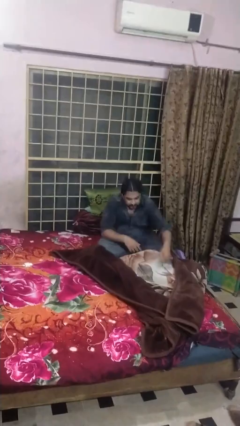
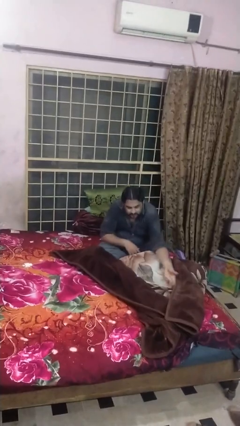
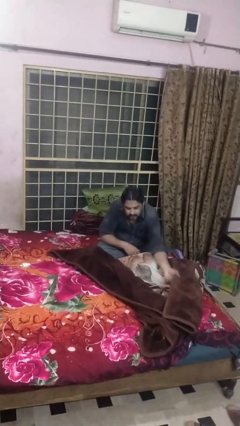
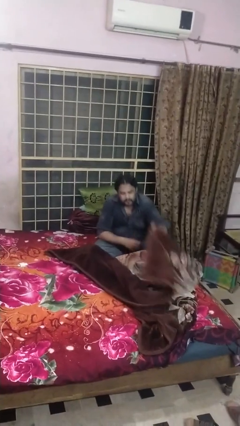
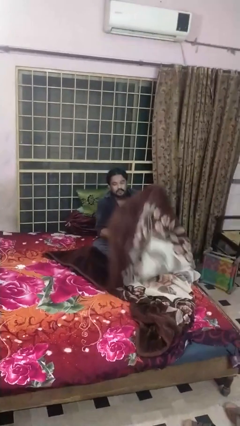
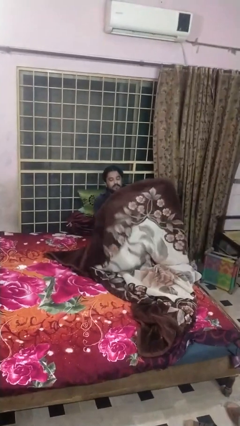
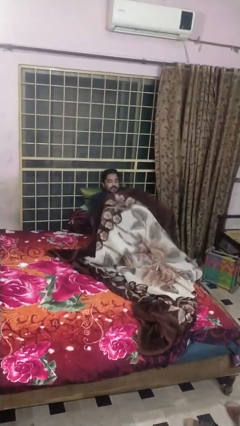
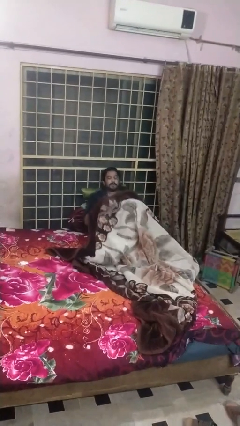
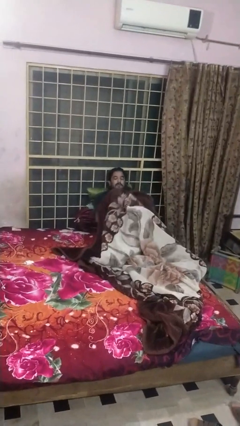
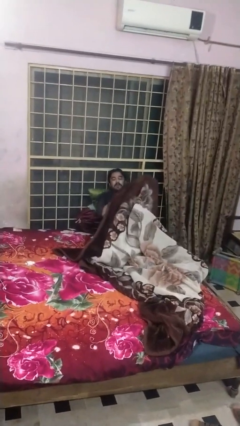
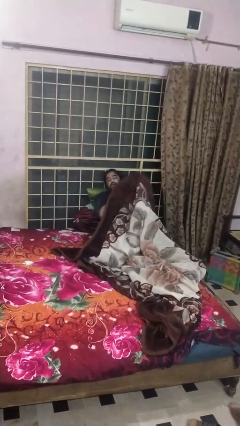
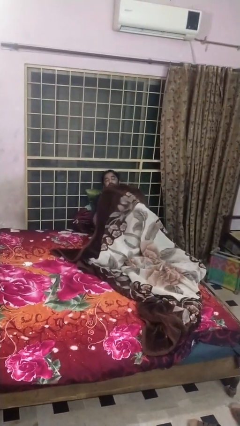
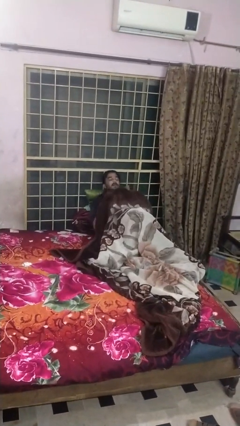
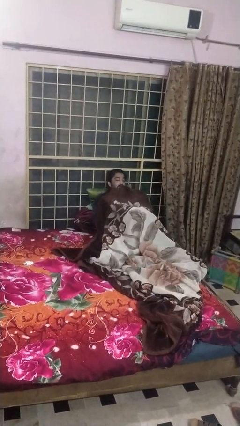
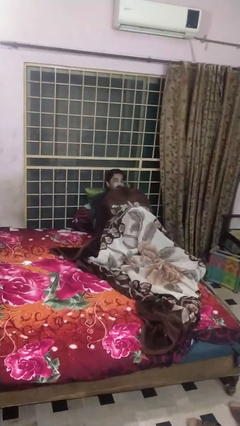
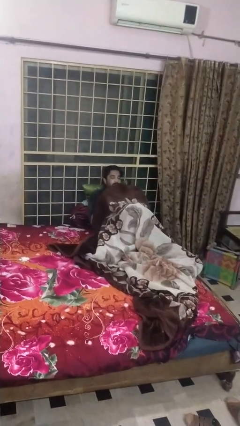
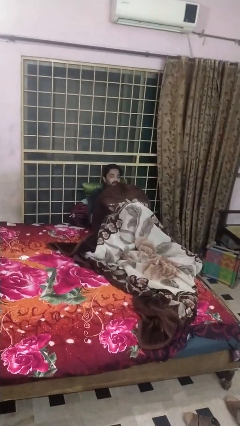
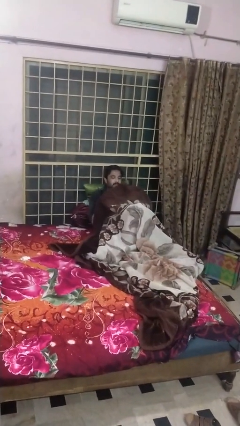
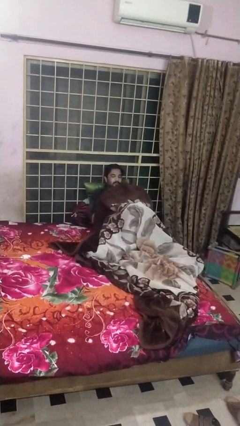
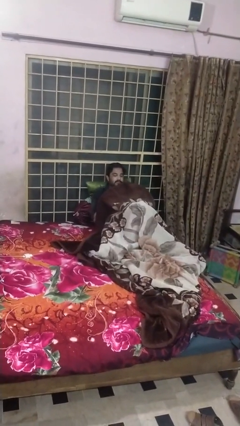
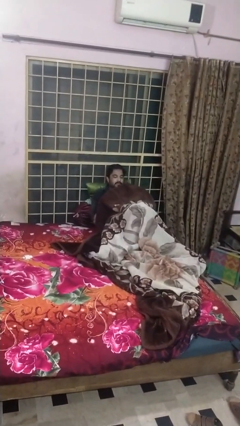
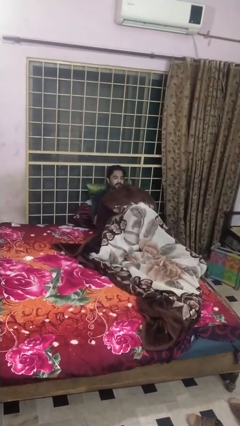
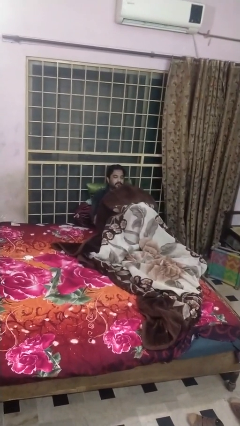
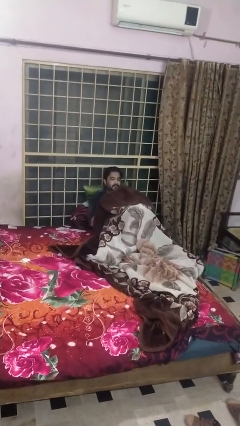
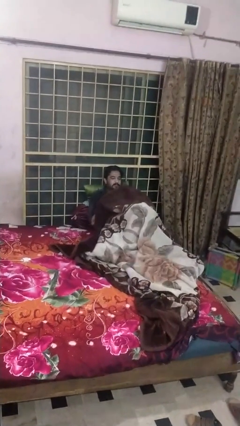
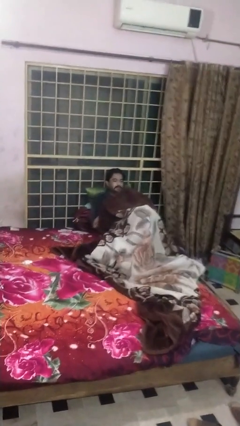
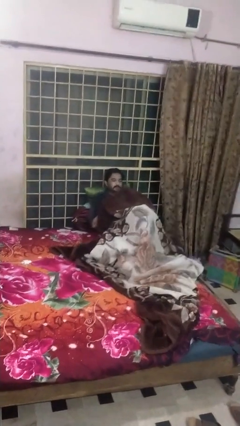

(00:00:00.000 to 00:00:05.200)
person covers with blanket

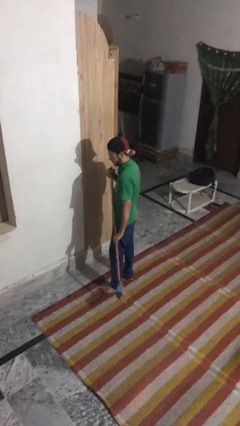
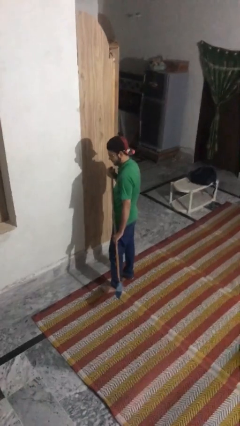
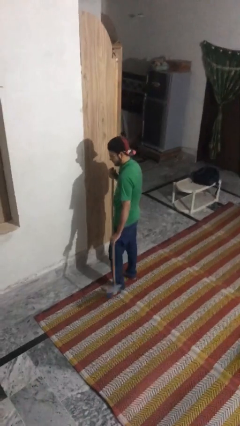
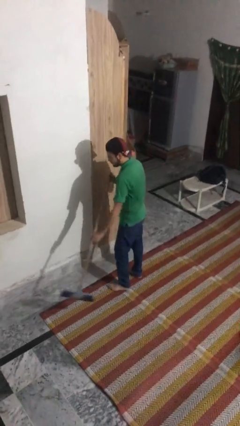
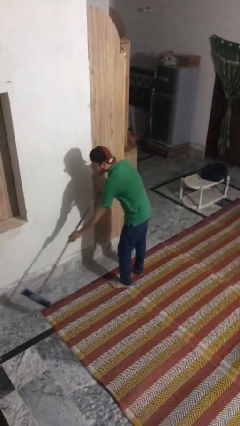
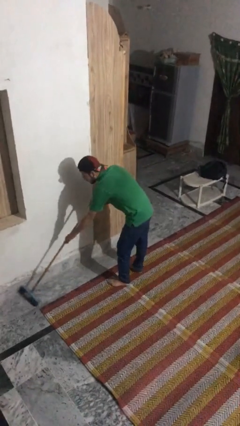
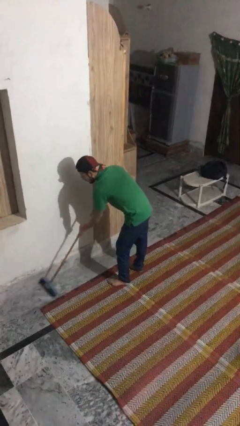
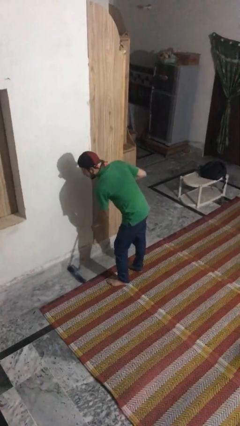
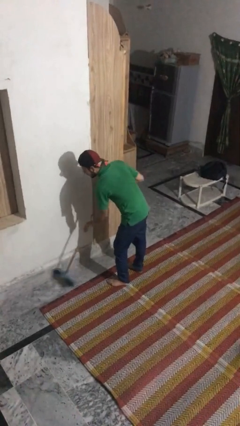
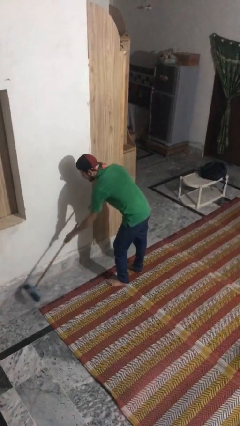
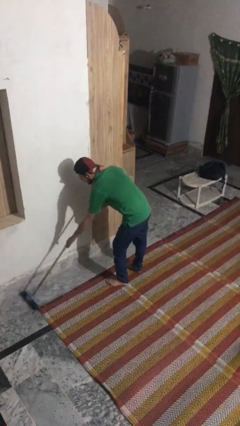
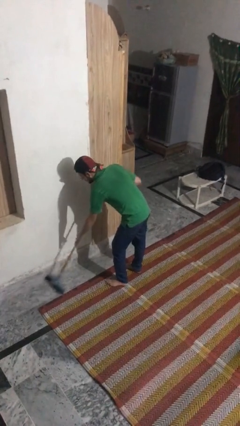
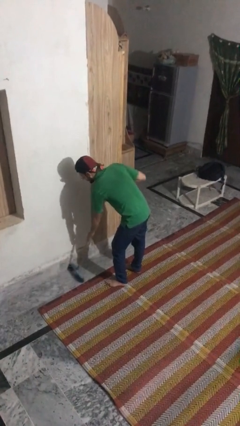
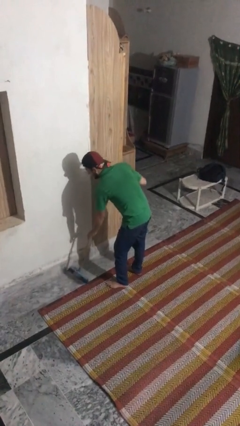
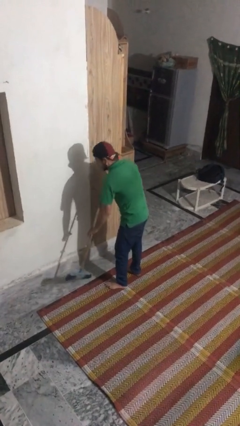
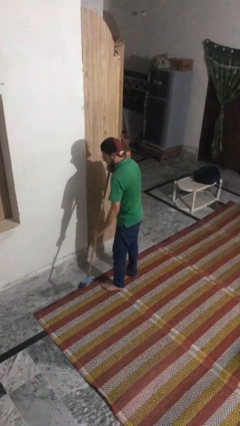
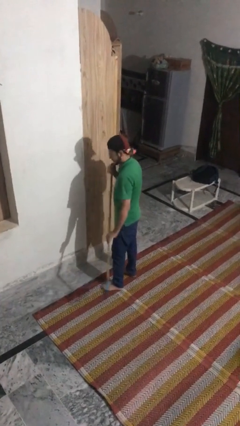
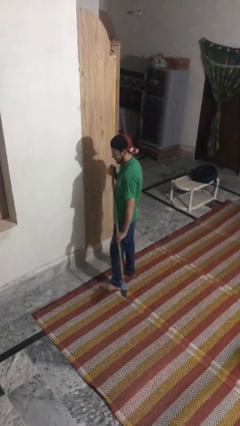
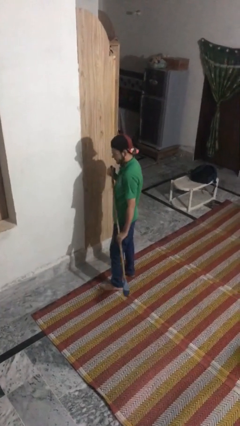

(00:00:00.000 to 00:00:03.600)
person sweeps floor

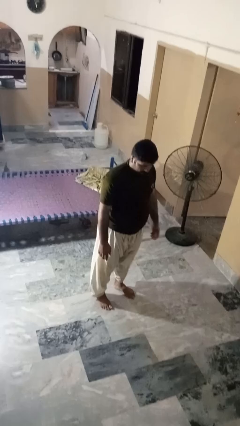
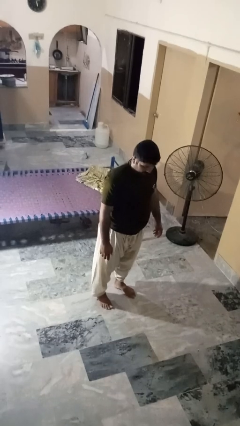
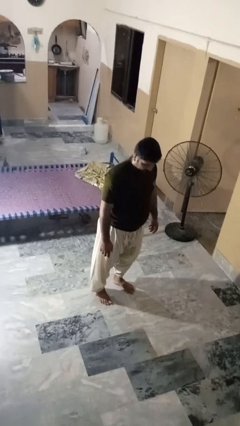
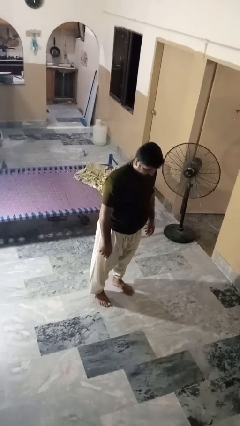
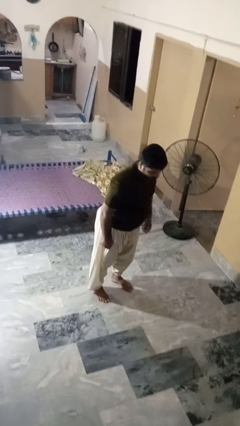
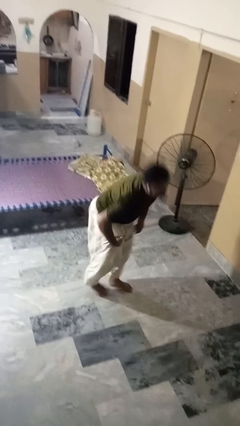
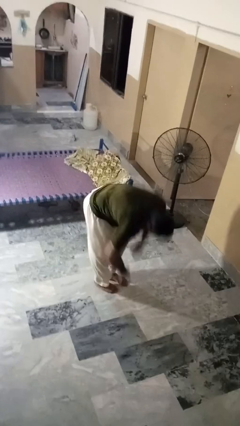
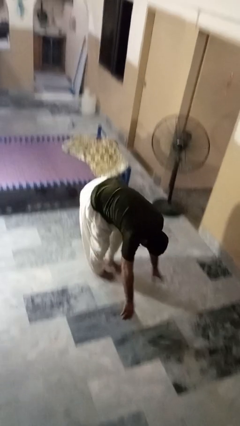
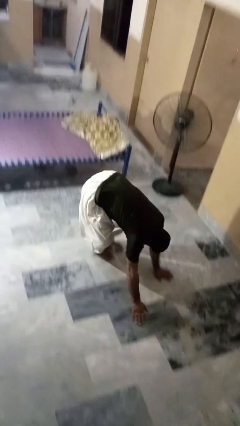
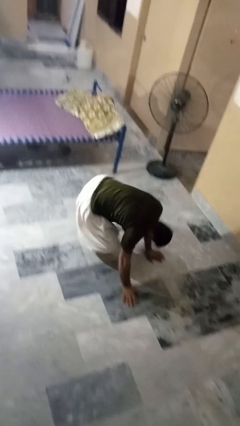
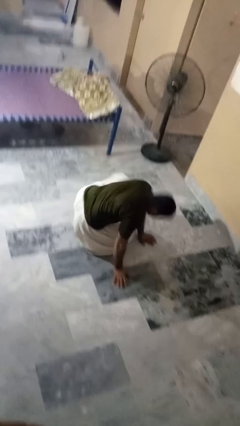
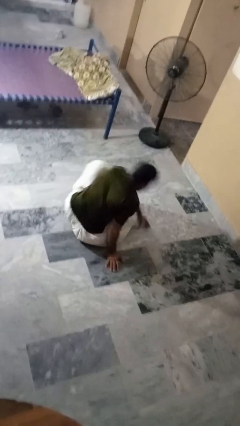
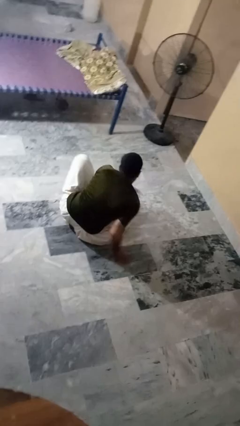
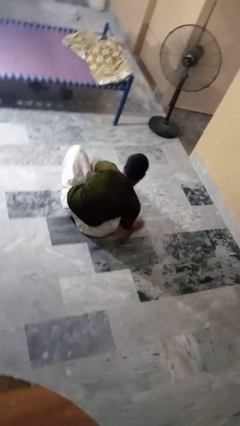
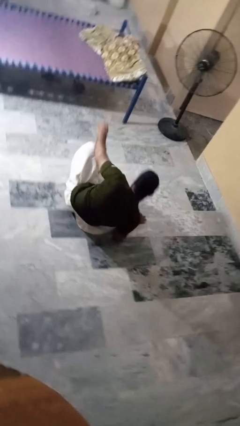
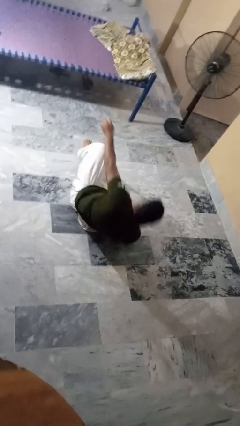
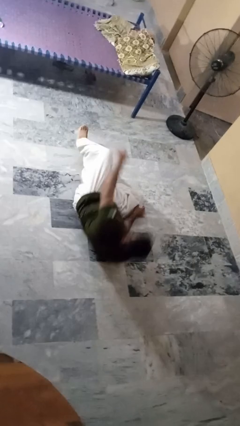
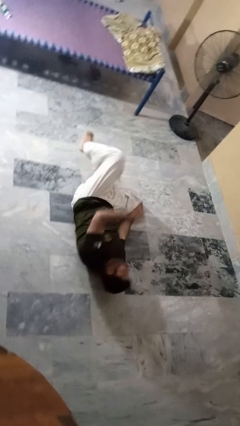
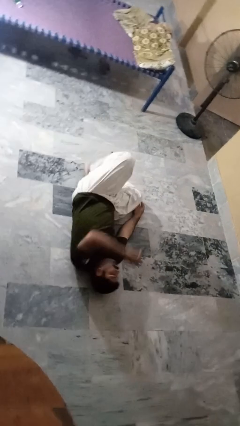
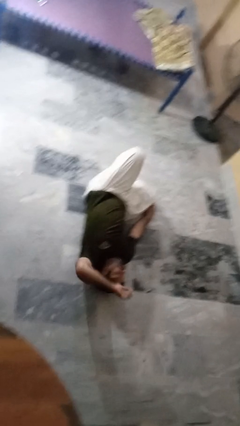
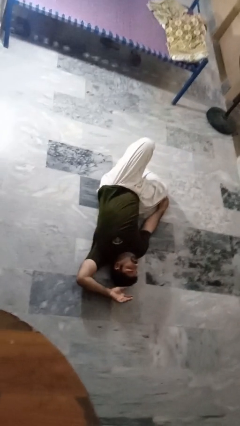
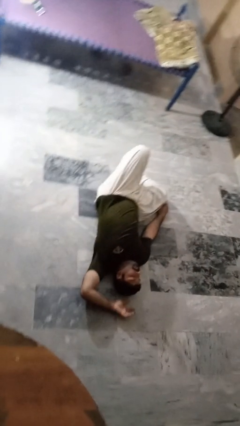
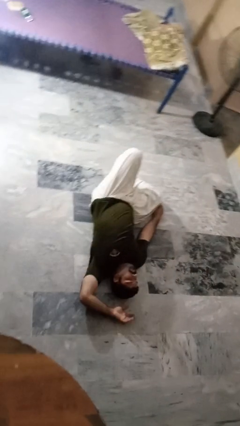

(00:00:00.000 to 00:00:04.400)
person falls while standing

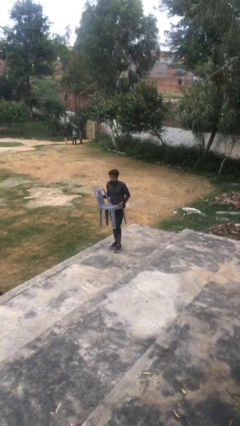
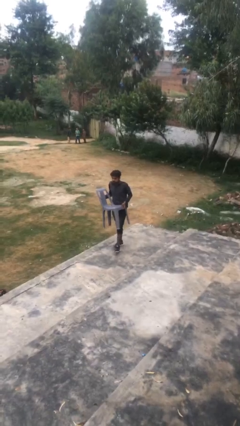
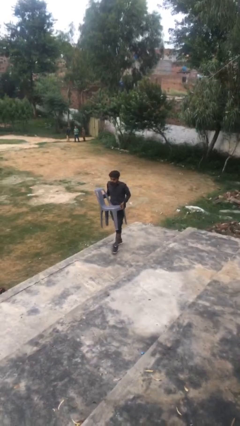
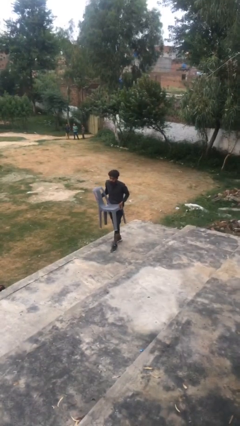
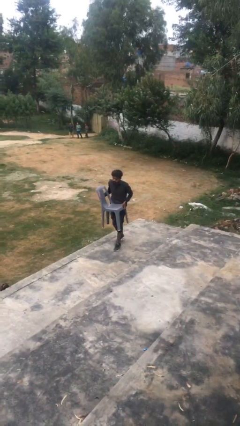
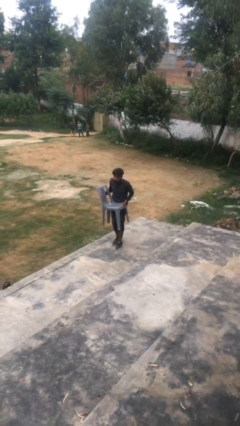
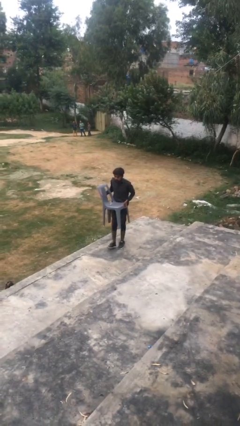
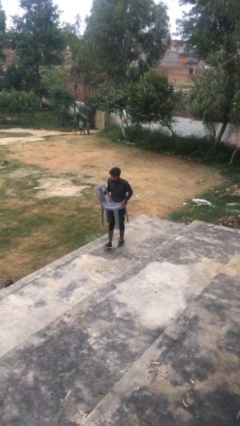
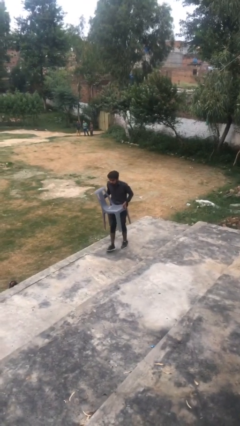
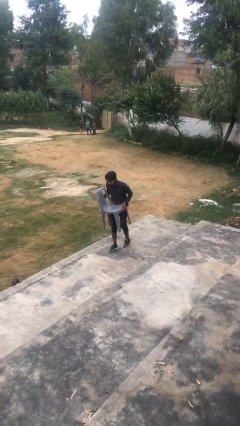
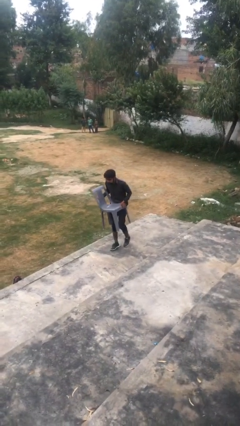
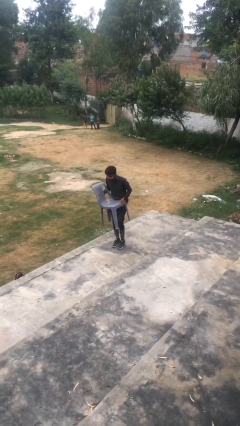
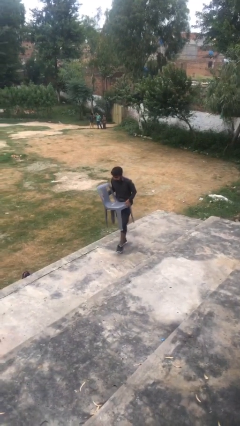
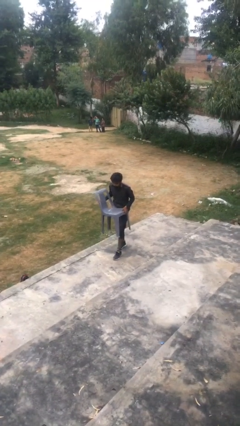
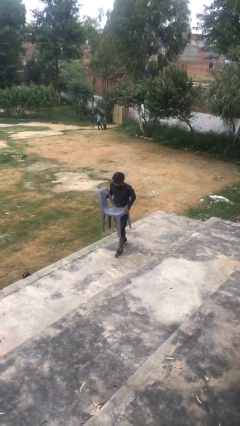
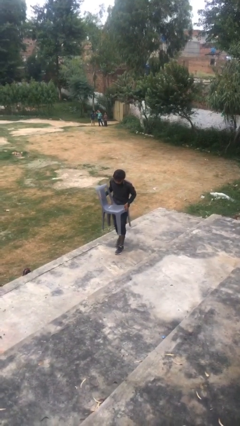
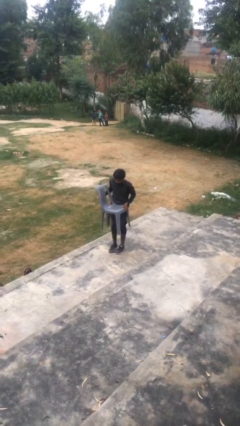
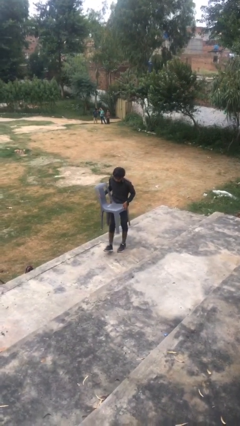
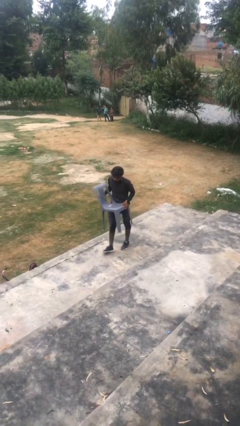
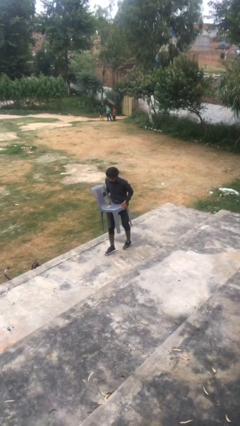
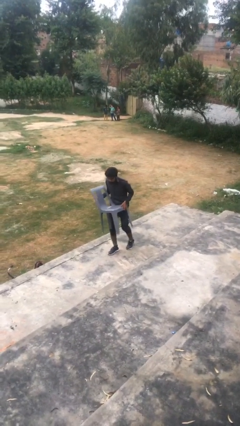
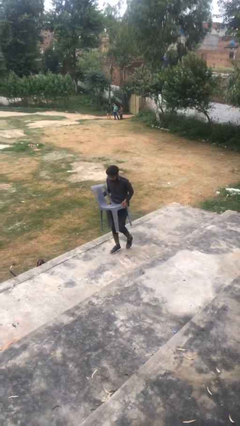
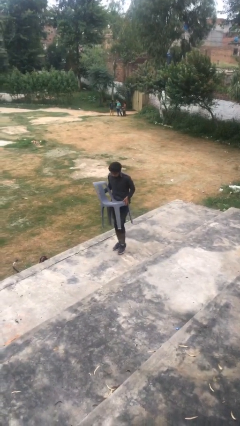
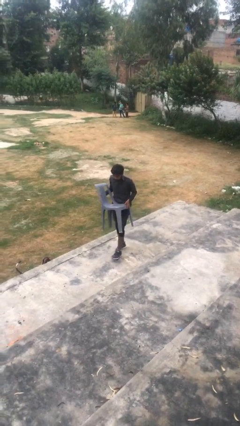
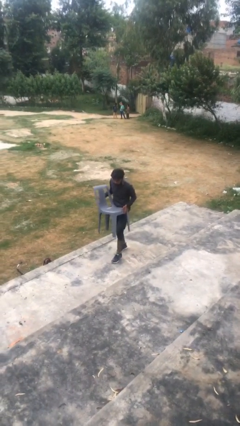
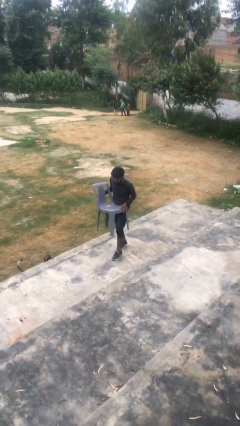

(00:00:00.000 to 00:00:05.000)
person carries heavy object
